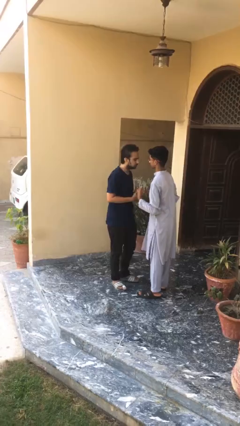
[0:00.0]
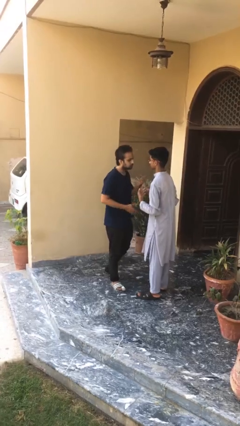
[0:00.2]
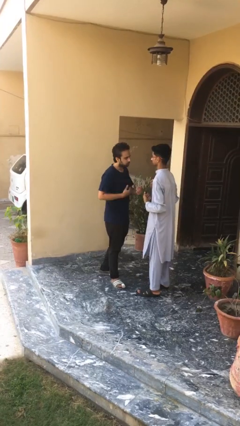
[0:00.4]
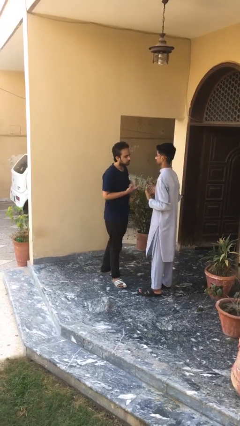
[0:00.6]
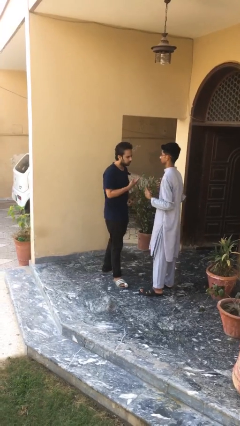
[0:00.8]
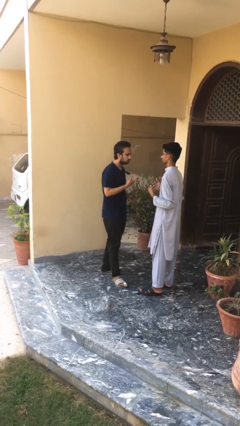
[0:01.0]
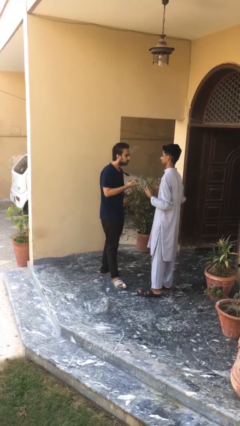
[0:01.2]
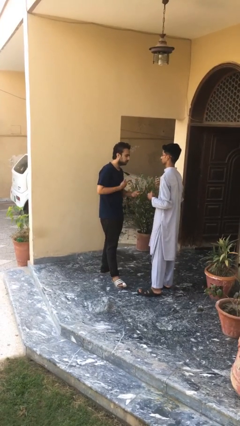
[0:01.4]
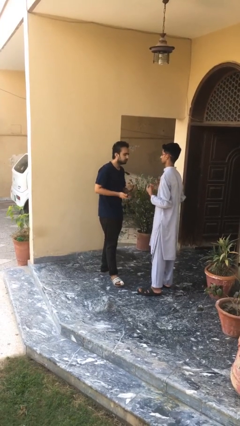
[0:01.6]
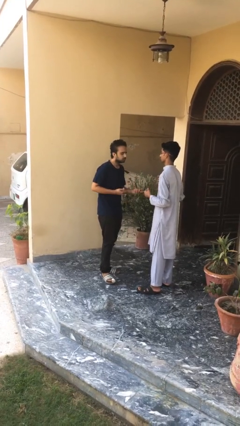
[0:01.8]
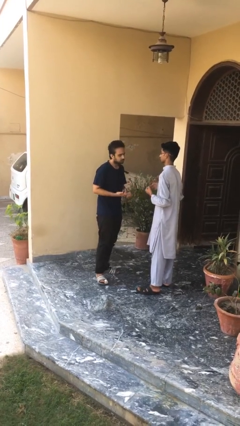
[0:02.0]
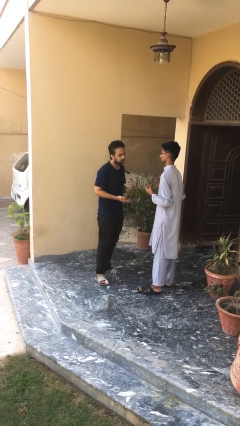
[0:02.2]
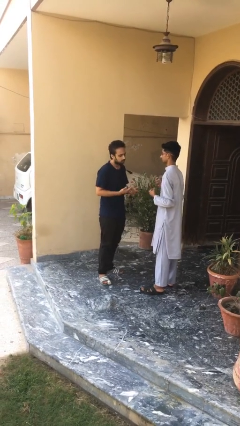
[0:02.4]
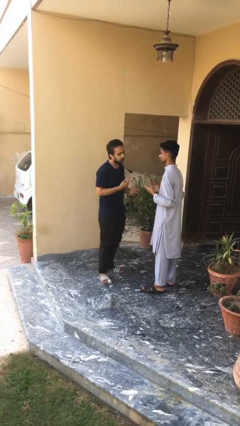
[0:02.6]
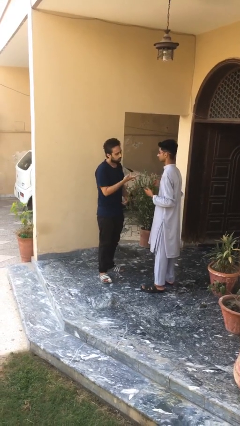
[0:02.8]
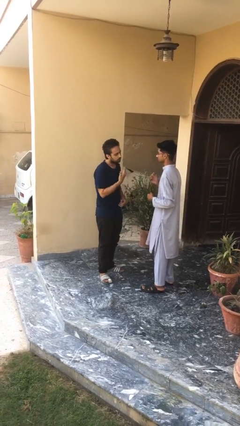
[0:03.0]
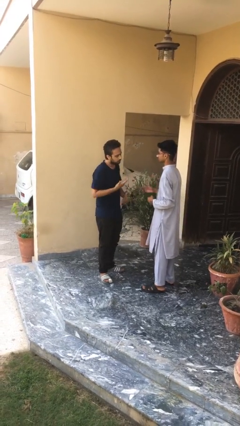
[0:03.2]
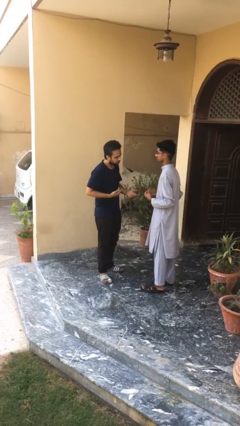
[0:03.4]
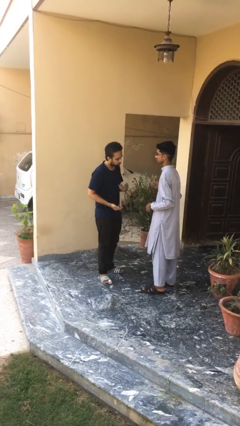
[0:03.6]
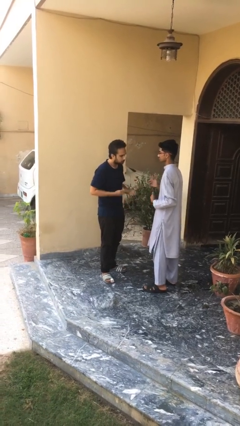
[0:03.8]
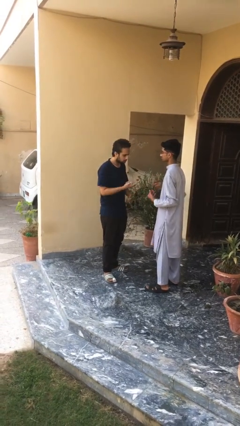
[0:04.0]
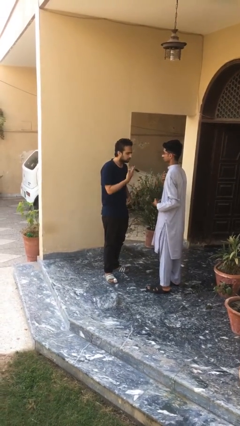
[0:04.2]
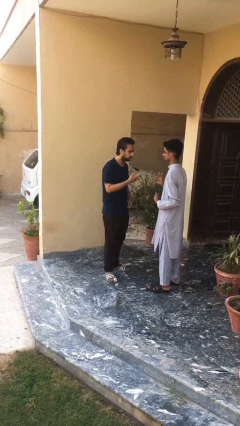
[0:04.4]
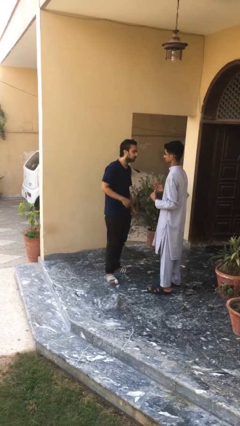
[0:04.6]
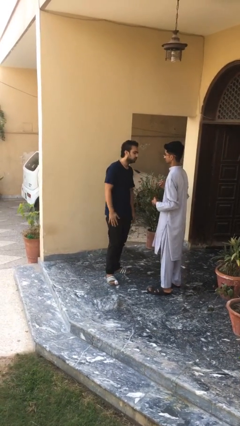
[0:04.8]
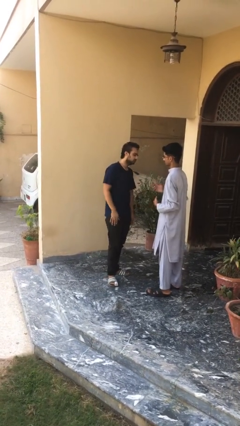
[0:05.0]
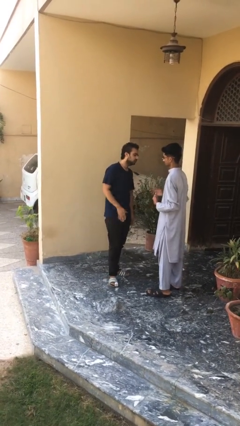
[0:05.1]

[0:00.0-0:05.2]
person talks to person

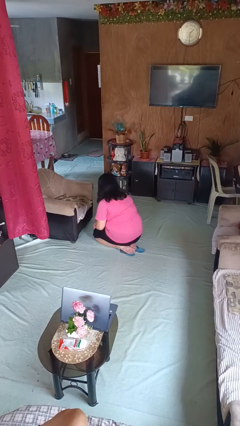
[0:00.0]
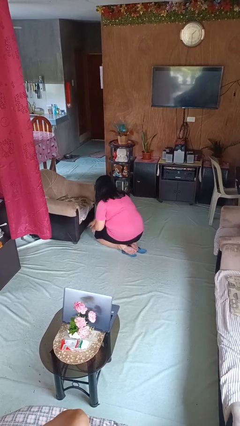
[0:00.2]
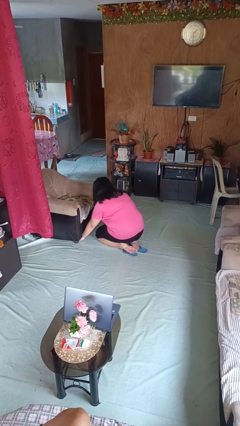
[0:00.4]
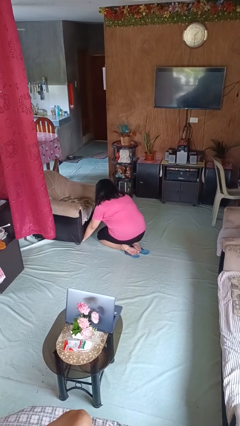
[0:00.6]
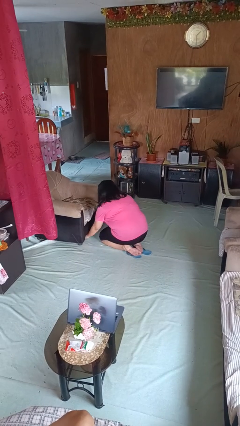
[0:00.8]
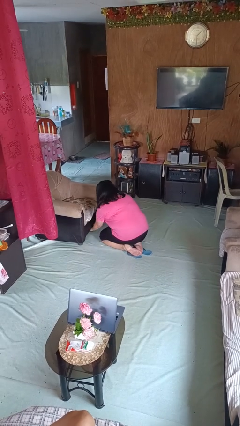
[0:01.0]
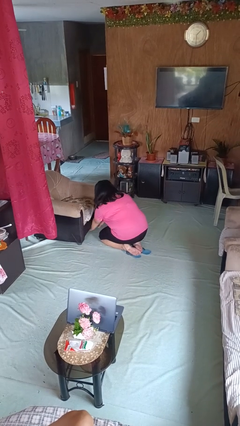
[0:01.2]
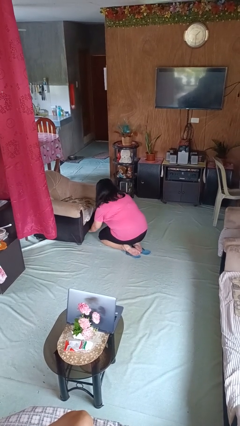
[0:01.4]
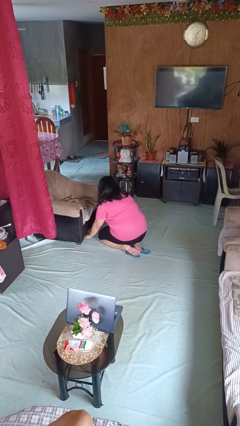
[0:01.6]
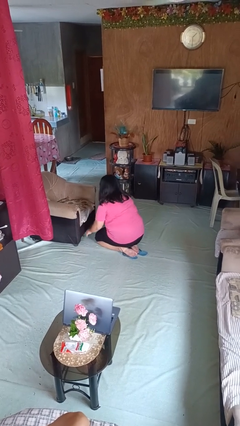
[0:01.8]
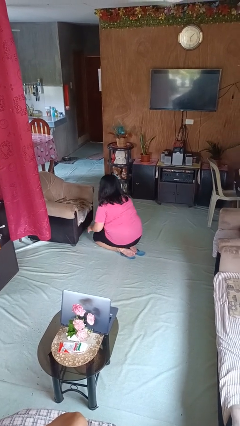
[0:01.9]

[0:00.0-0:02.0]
person searches under couch

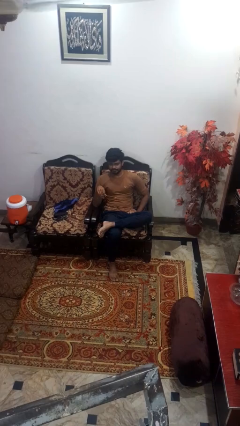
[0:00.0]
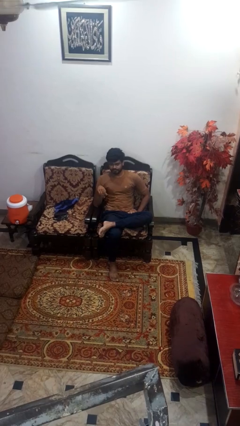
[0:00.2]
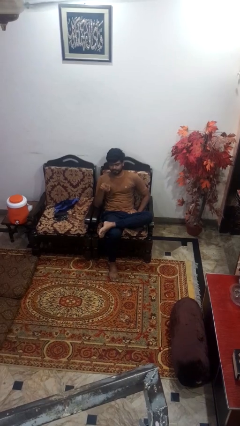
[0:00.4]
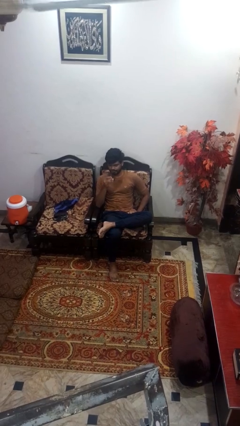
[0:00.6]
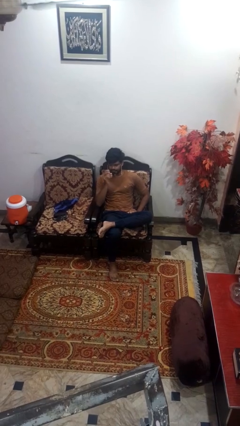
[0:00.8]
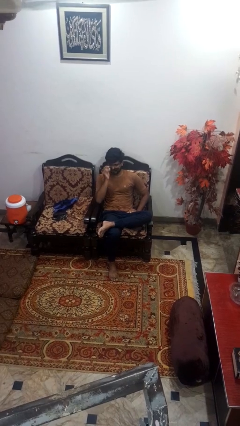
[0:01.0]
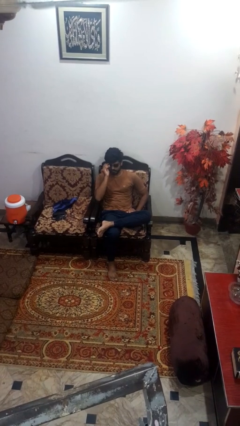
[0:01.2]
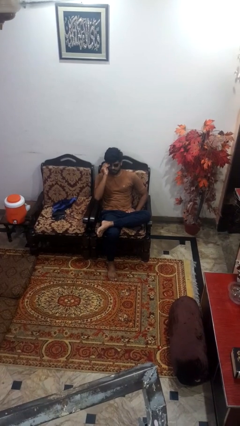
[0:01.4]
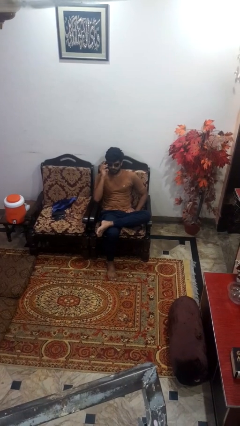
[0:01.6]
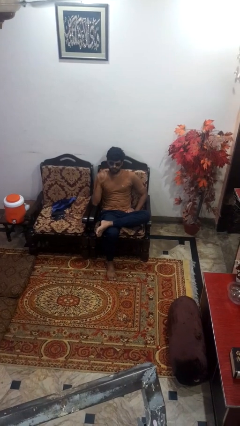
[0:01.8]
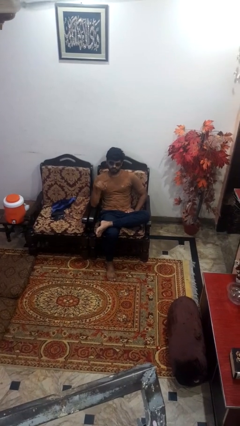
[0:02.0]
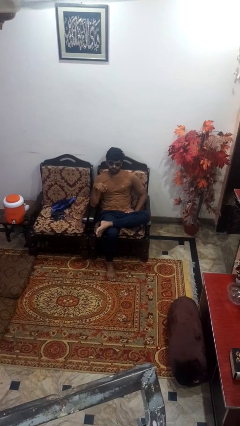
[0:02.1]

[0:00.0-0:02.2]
person puts on sunglasses

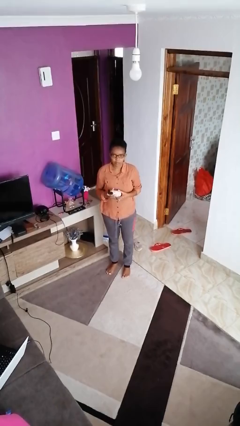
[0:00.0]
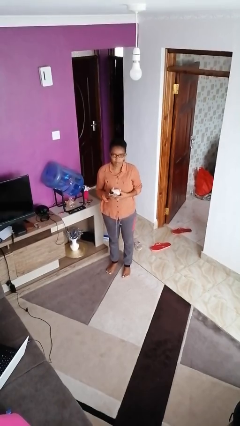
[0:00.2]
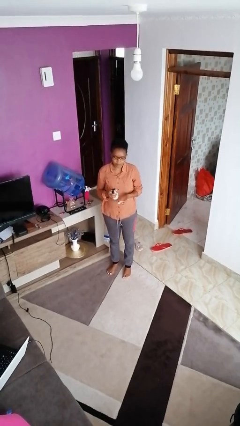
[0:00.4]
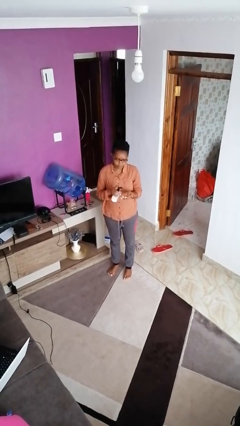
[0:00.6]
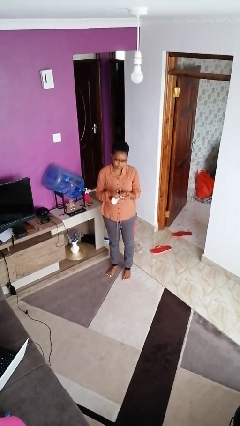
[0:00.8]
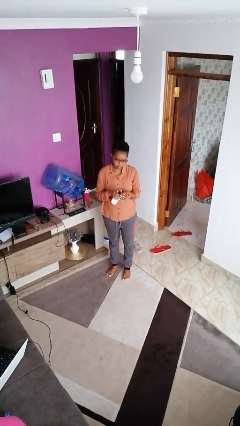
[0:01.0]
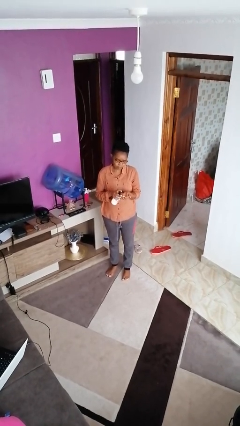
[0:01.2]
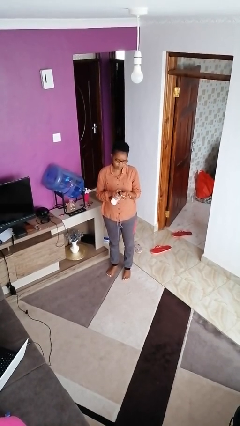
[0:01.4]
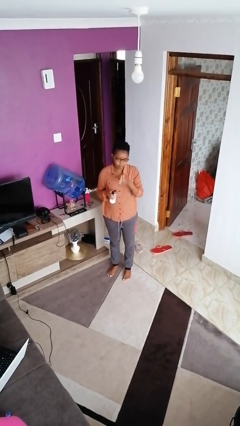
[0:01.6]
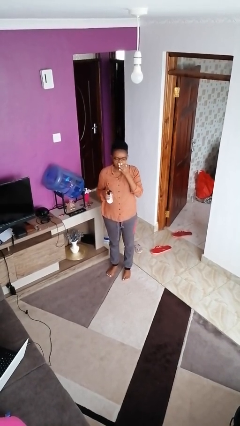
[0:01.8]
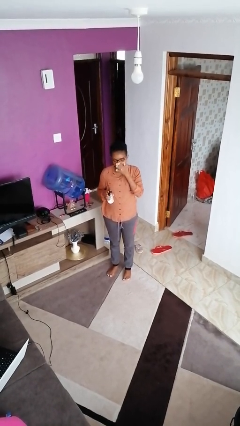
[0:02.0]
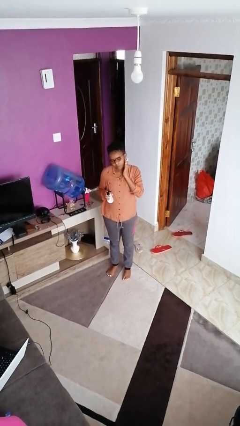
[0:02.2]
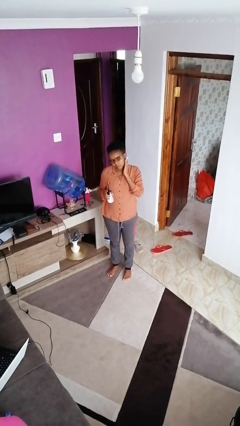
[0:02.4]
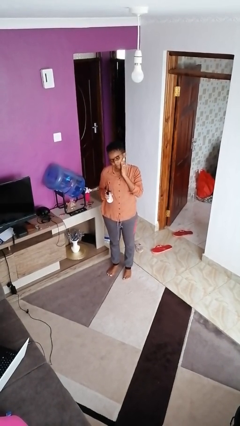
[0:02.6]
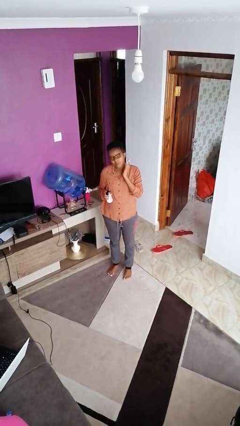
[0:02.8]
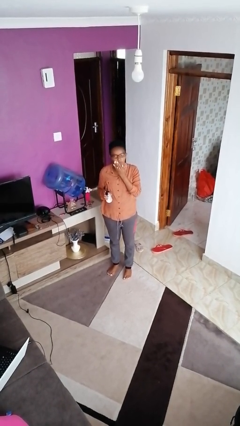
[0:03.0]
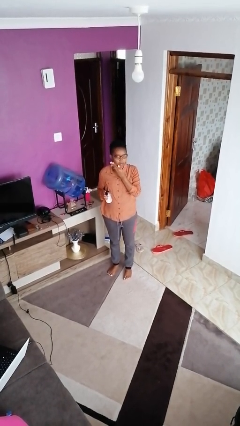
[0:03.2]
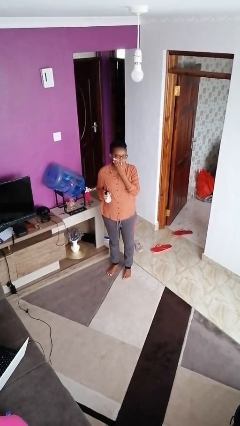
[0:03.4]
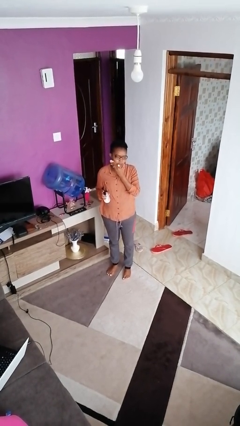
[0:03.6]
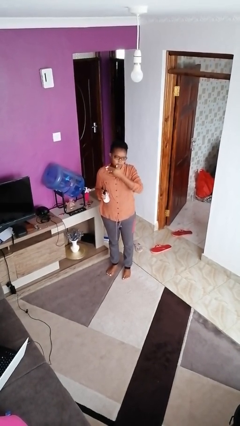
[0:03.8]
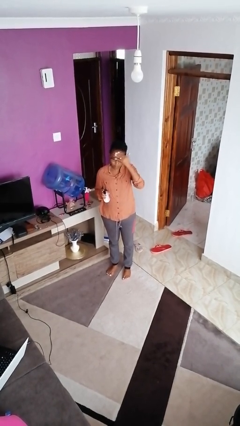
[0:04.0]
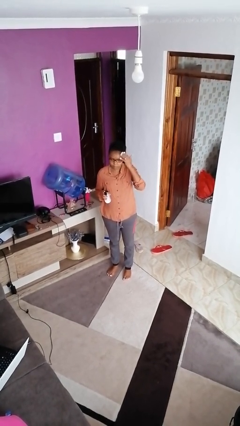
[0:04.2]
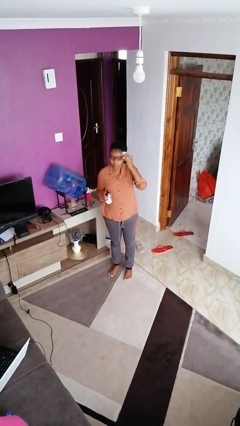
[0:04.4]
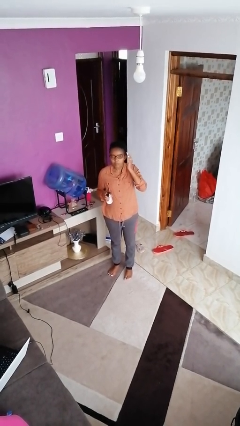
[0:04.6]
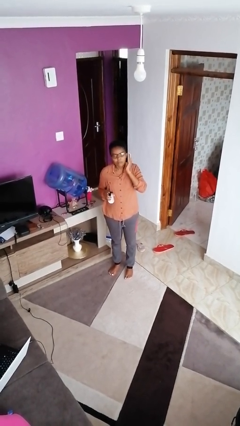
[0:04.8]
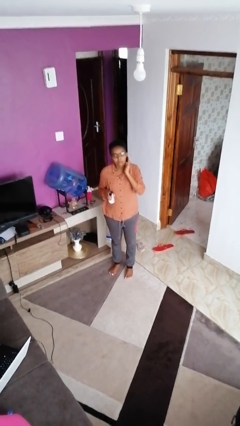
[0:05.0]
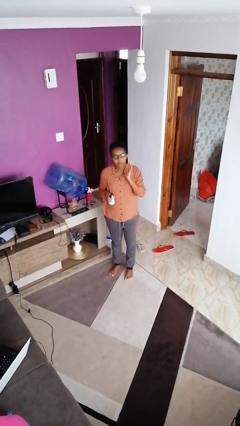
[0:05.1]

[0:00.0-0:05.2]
person applies facial moisturizer

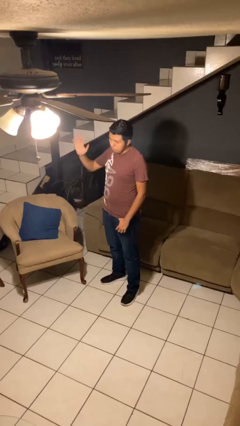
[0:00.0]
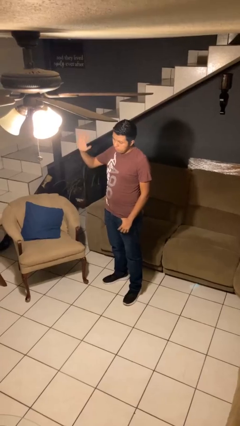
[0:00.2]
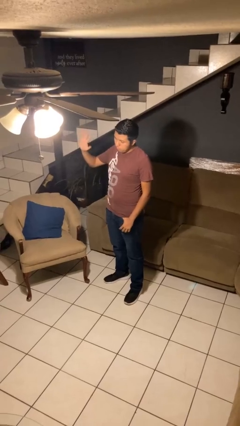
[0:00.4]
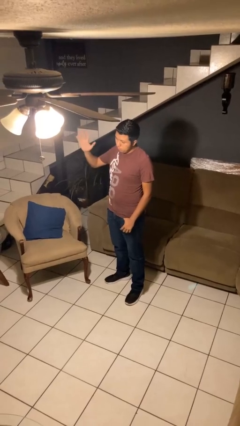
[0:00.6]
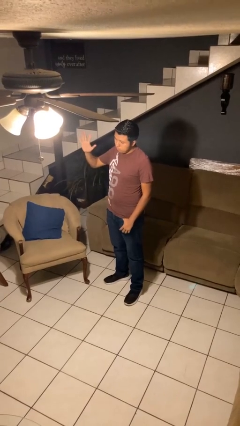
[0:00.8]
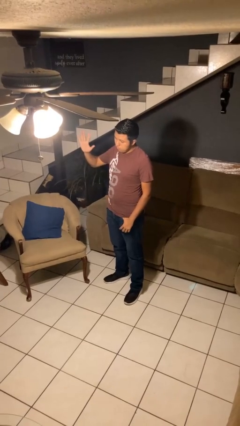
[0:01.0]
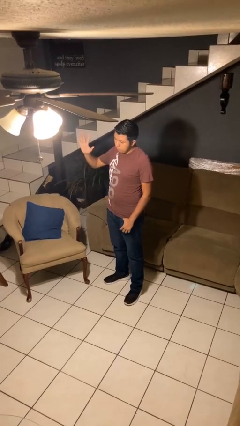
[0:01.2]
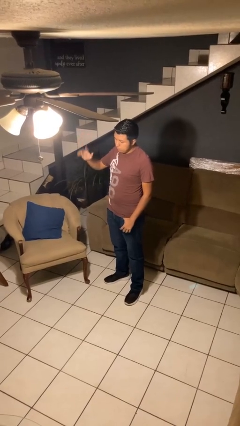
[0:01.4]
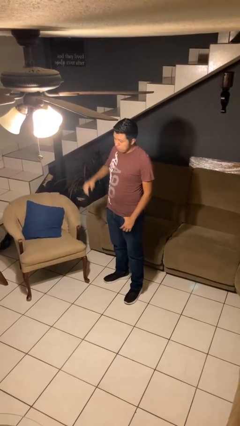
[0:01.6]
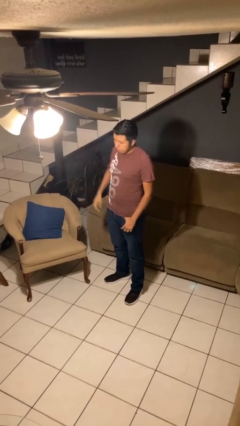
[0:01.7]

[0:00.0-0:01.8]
person waves at person

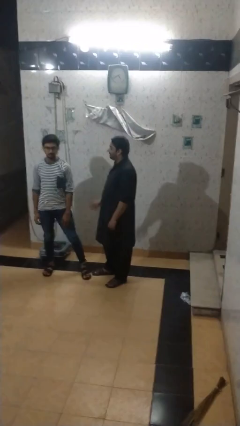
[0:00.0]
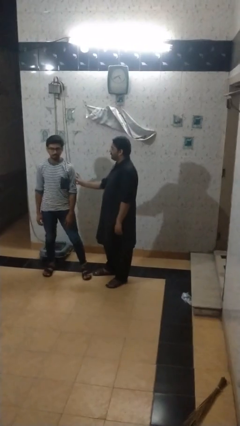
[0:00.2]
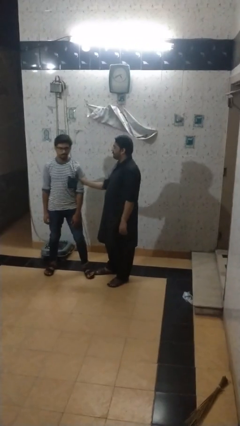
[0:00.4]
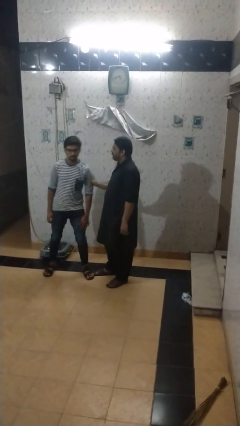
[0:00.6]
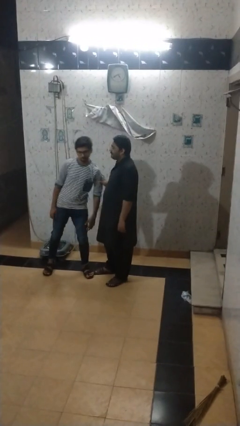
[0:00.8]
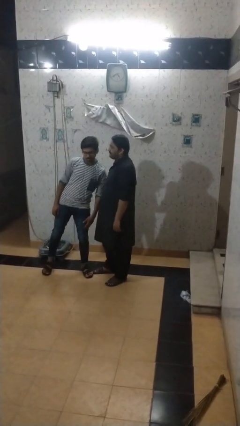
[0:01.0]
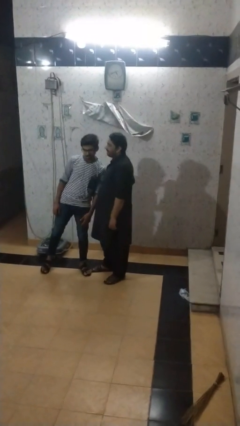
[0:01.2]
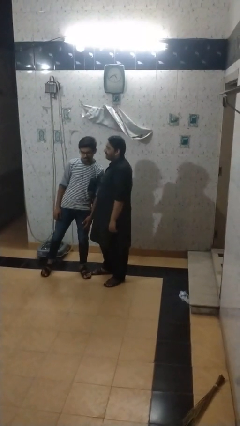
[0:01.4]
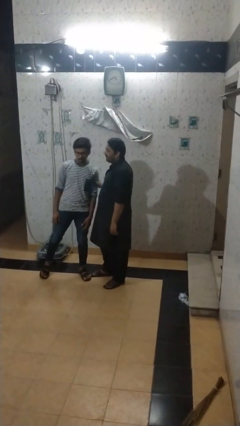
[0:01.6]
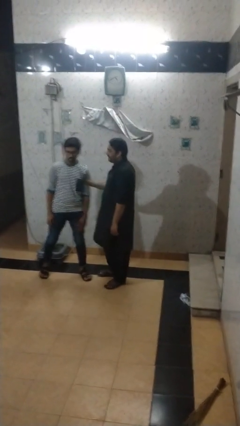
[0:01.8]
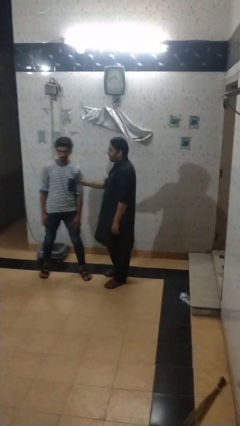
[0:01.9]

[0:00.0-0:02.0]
person grabs person by bicep
